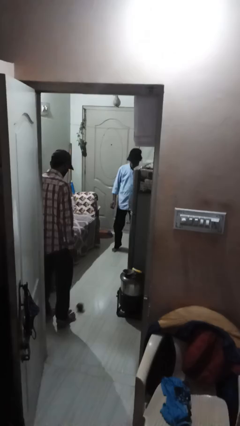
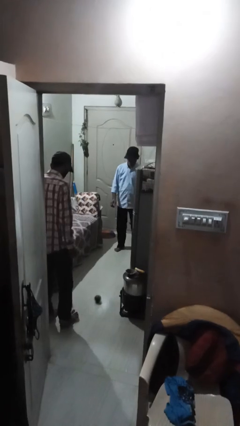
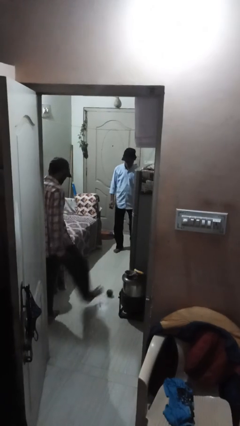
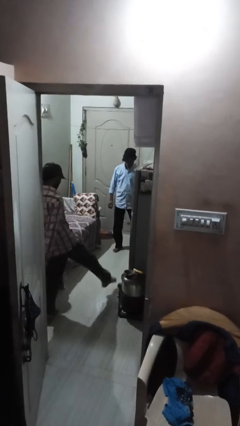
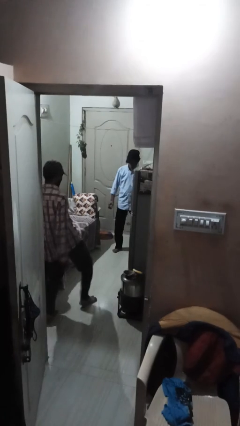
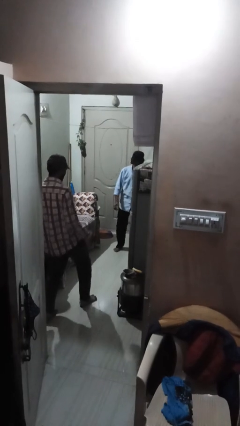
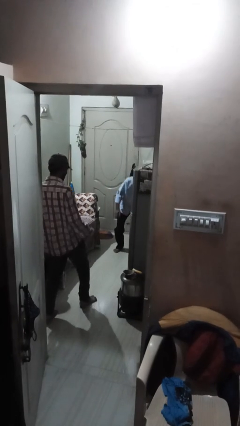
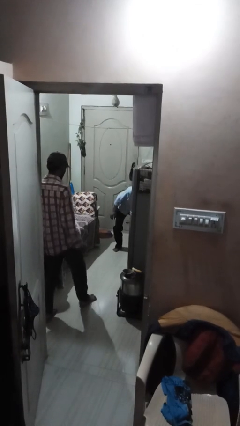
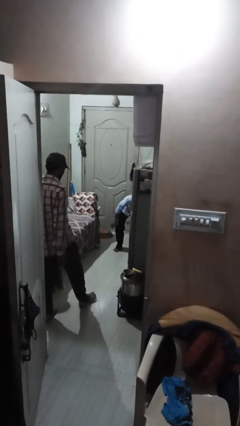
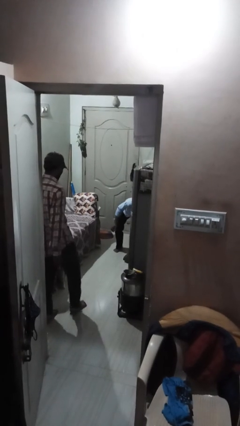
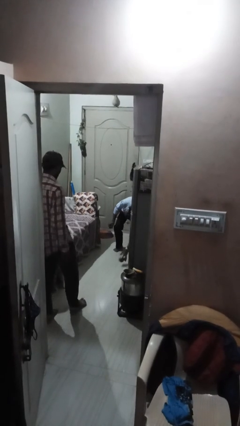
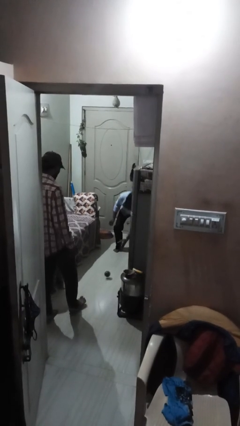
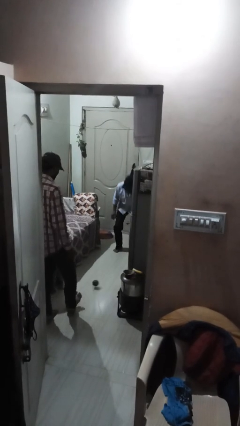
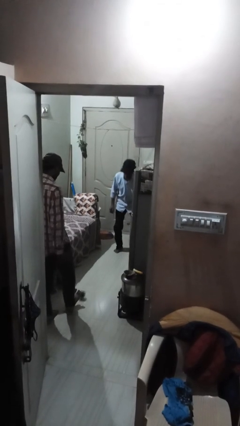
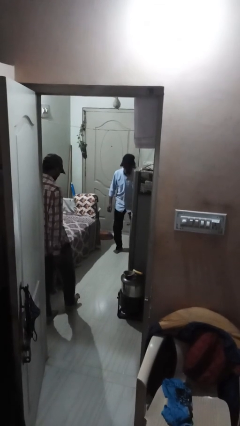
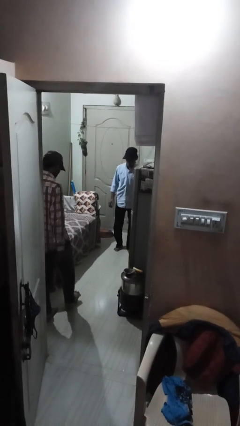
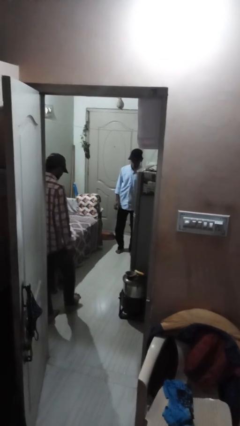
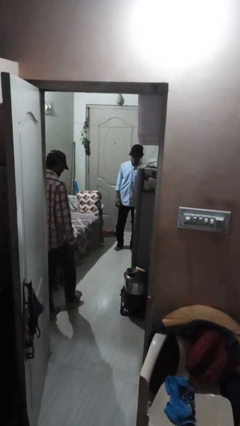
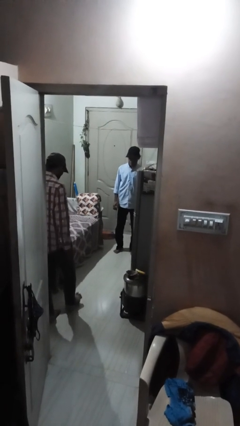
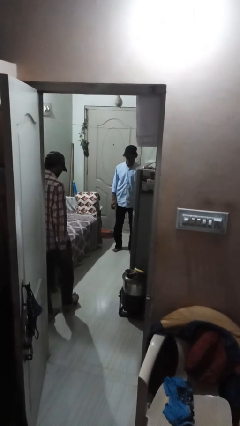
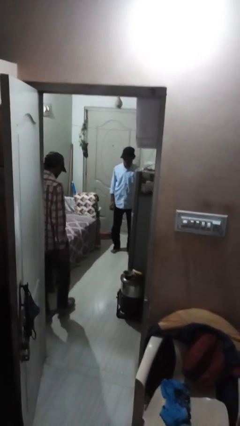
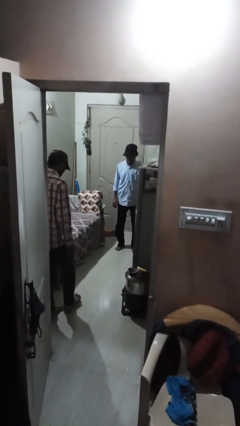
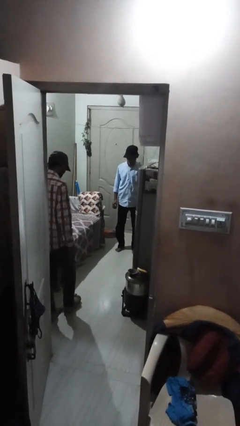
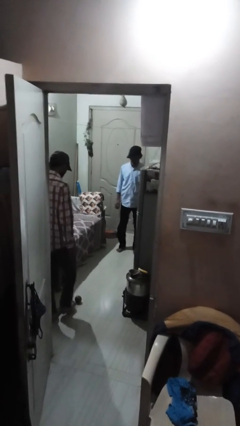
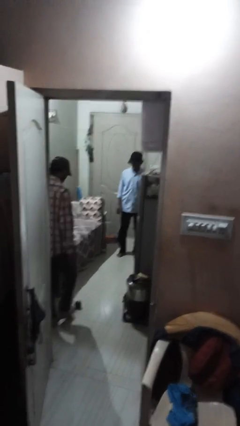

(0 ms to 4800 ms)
person kicks object to person

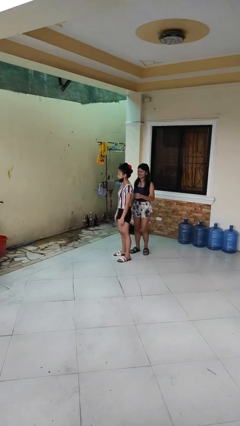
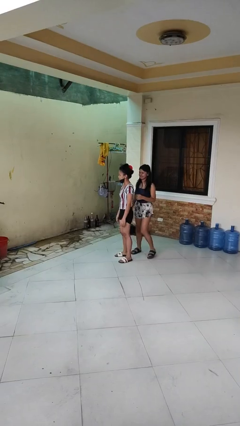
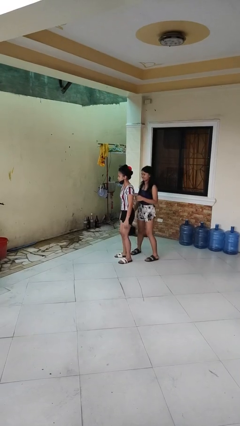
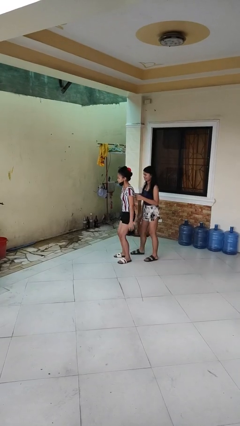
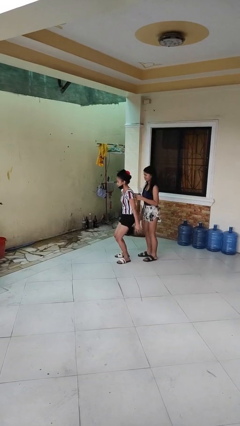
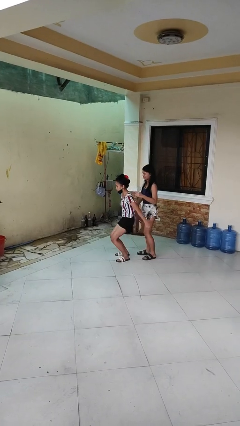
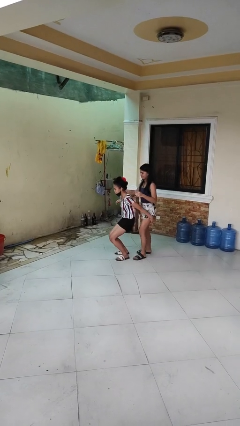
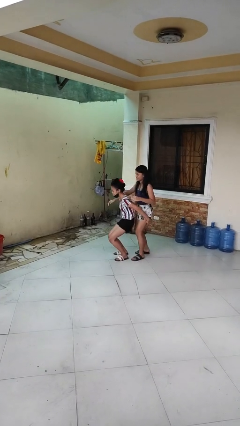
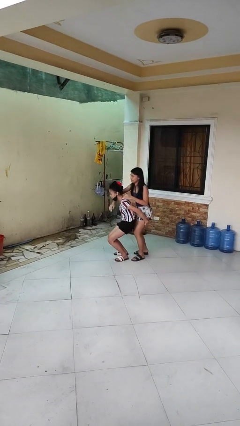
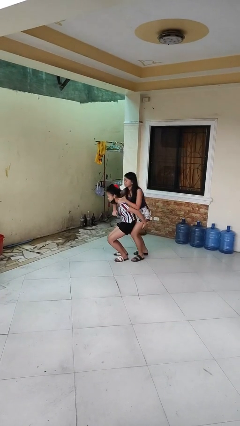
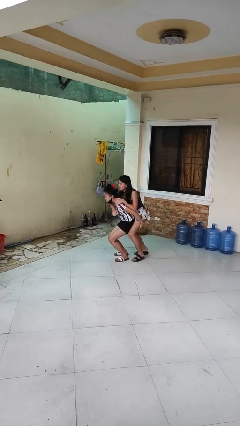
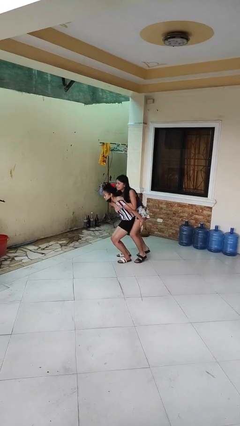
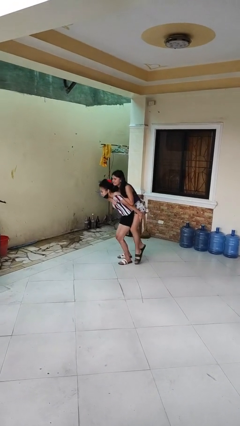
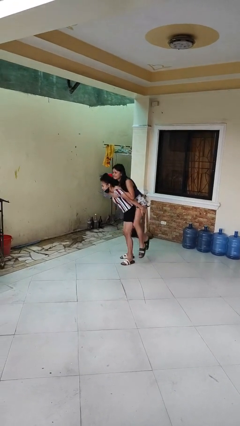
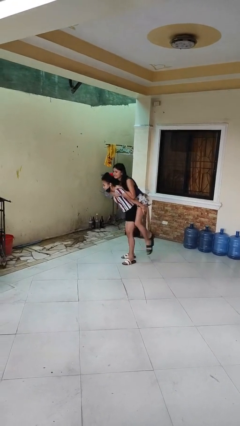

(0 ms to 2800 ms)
person carries person over shoulder

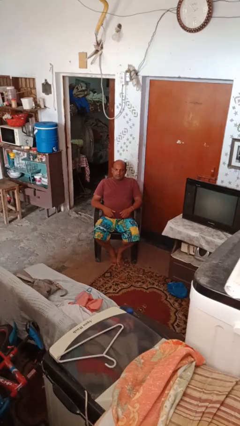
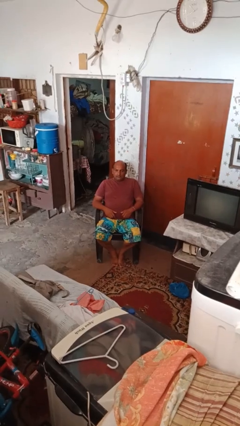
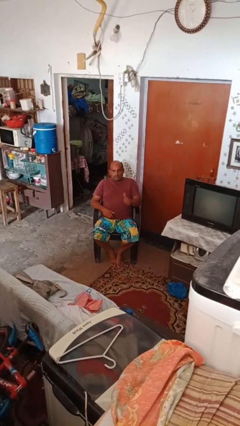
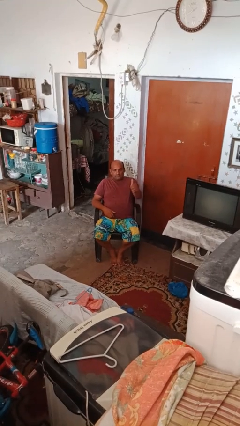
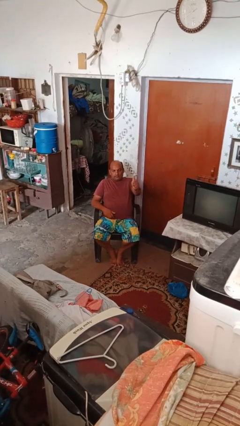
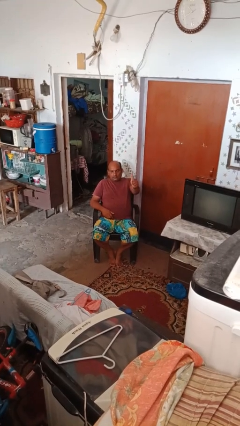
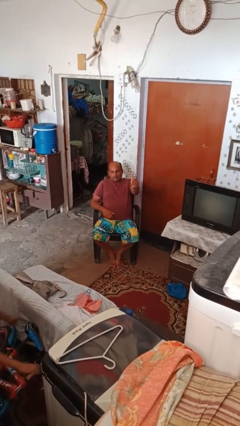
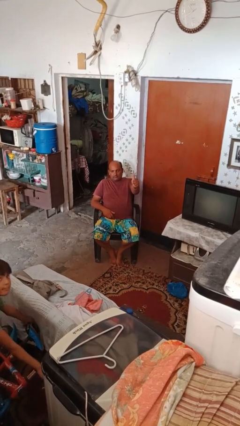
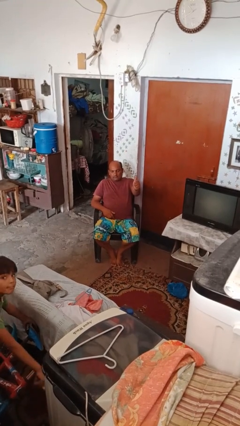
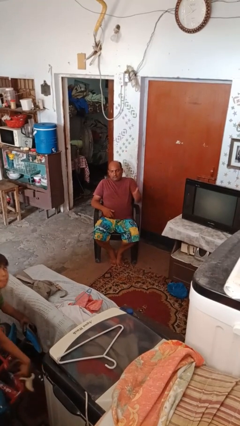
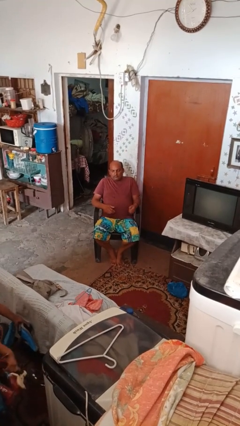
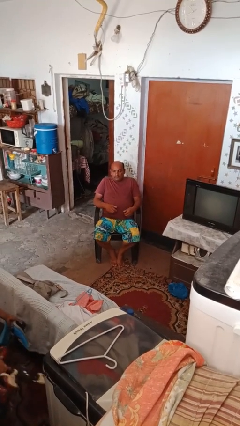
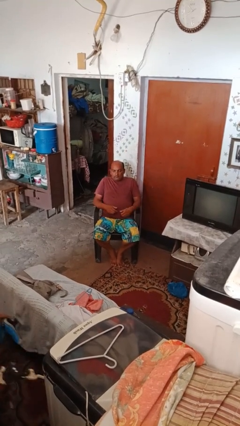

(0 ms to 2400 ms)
person gestures thumbs up

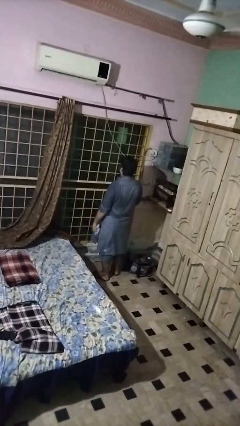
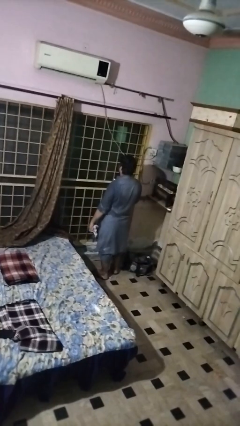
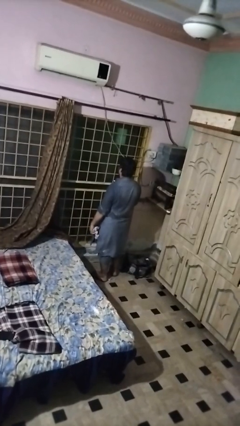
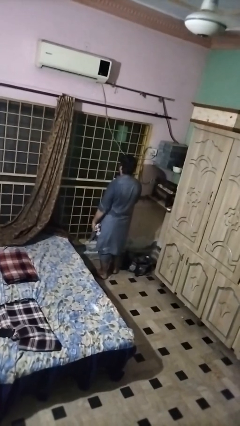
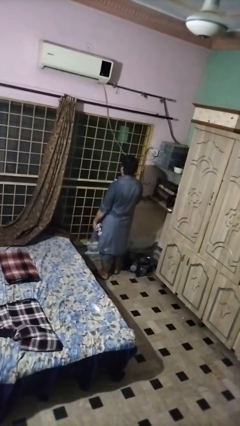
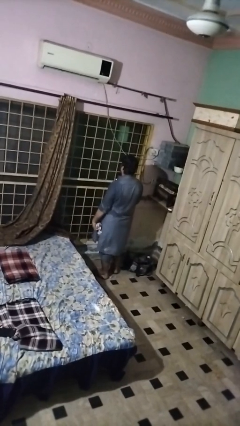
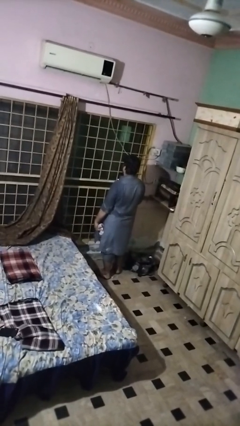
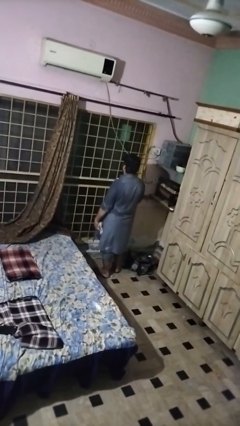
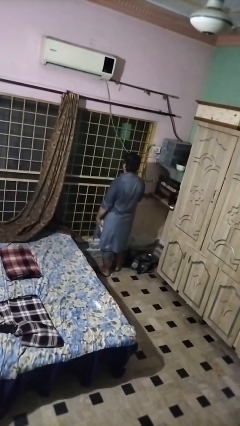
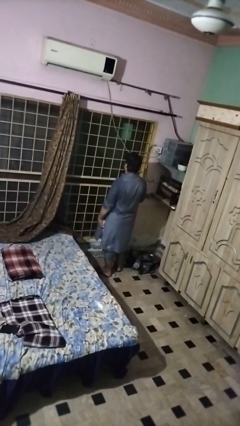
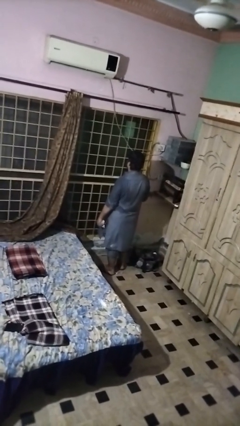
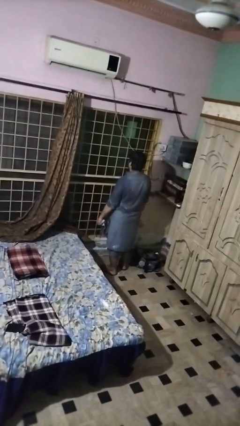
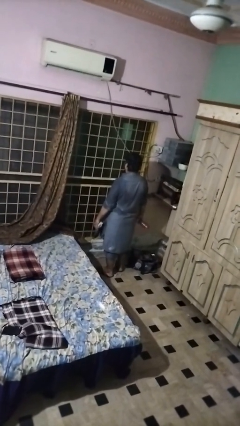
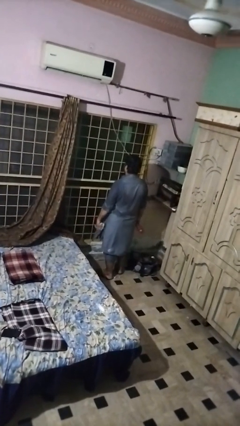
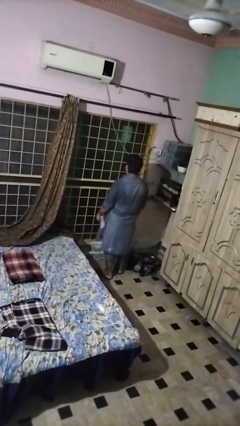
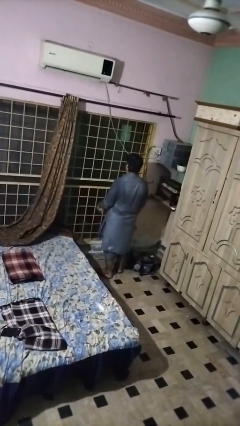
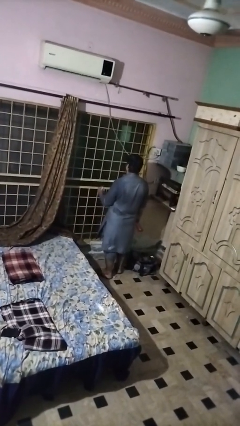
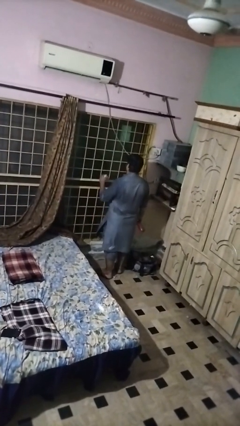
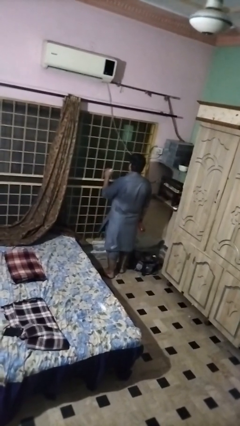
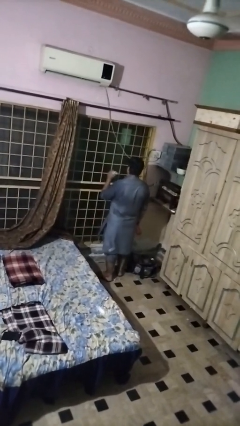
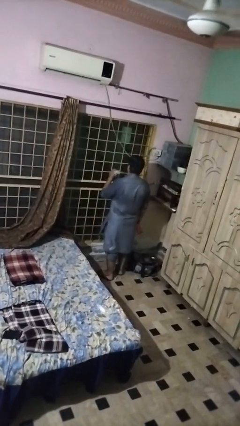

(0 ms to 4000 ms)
person sprays from bottle

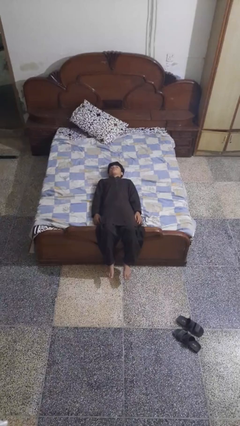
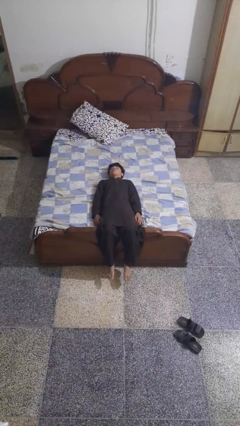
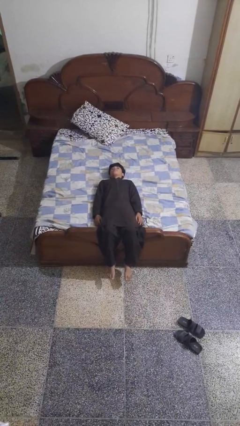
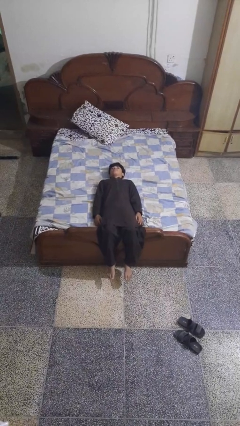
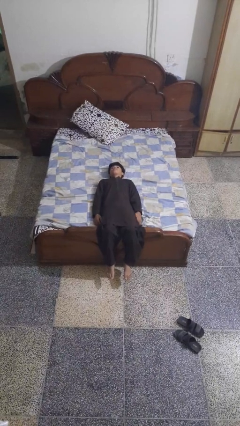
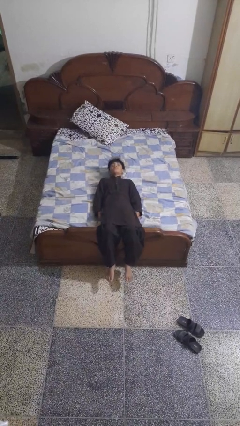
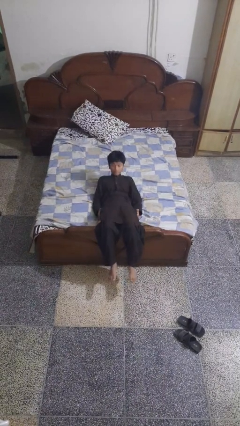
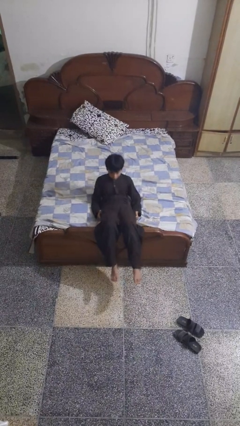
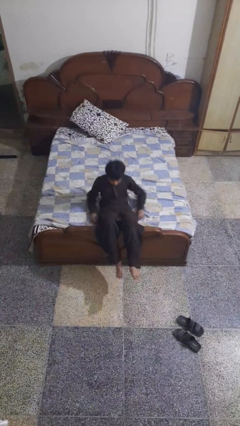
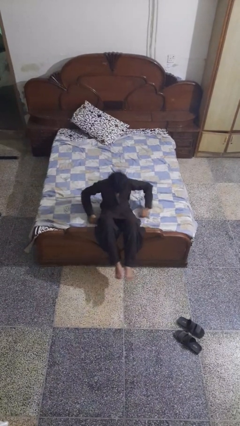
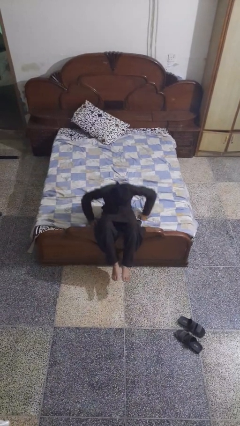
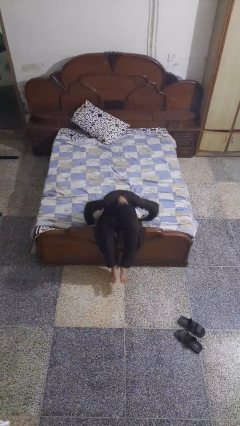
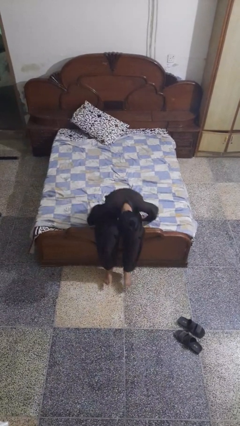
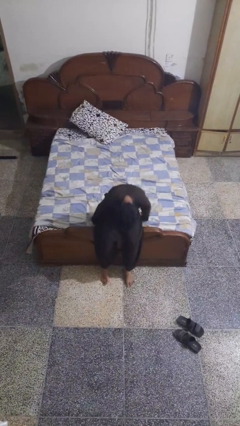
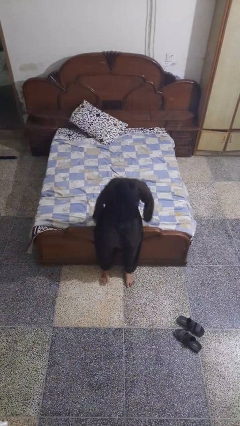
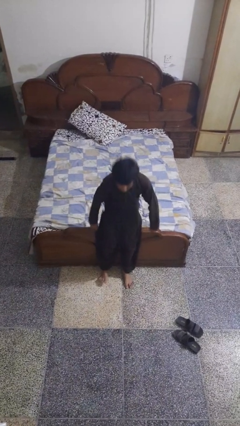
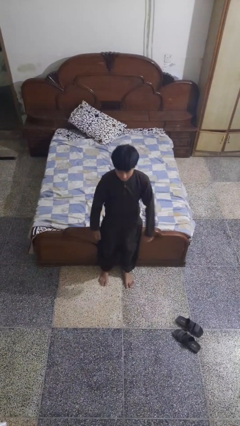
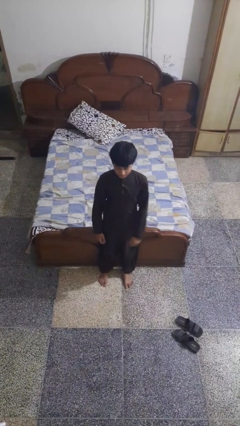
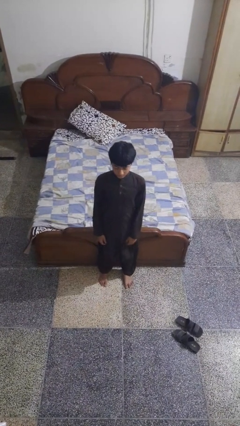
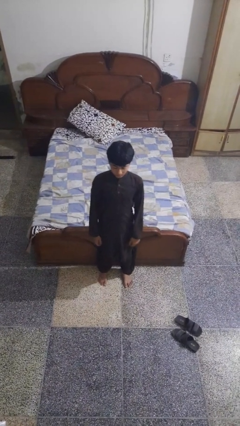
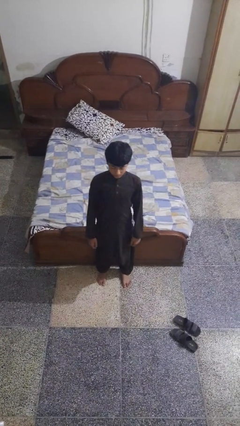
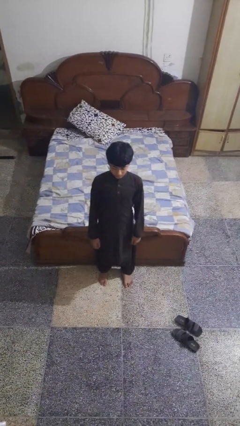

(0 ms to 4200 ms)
person stands up
